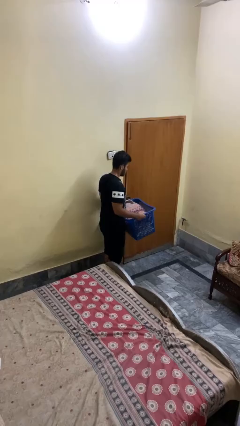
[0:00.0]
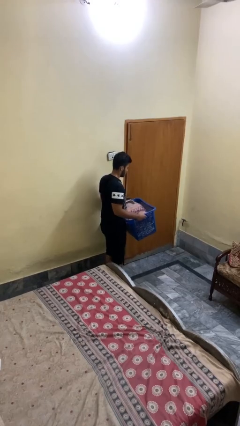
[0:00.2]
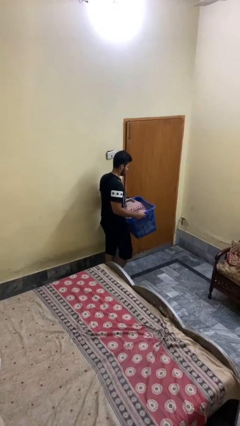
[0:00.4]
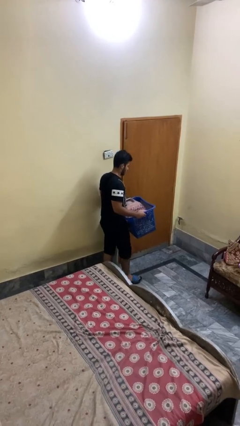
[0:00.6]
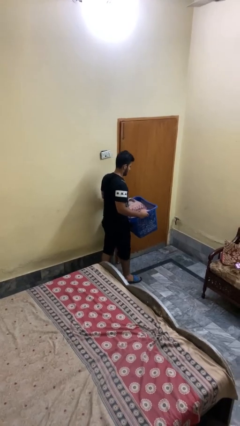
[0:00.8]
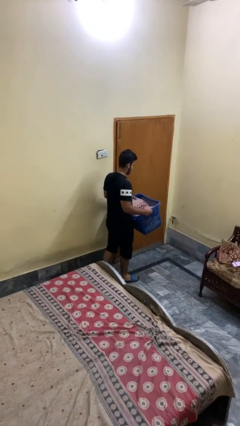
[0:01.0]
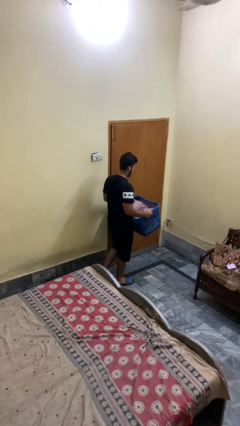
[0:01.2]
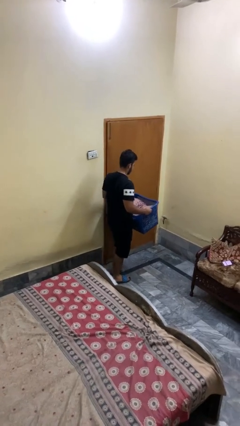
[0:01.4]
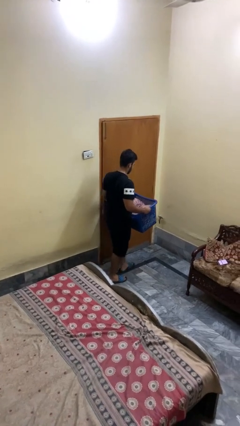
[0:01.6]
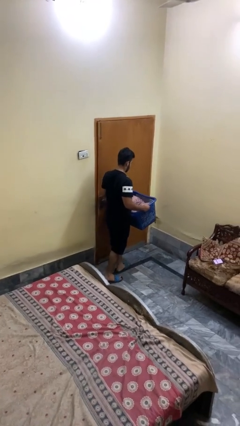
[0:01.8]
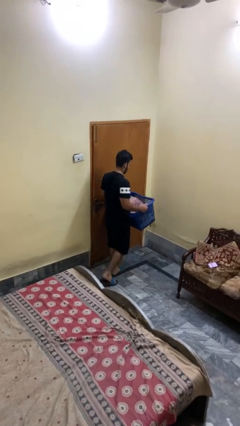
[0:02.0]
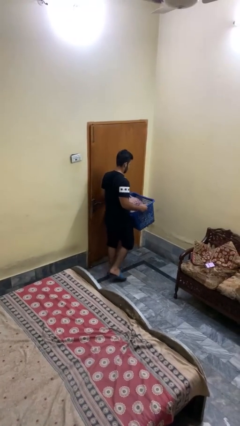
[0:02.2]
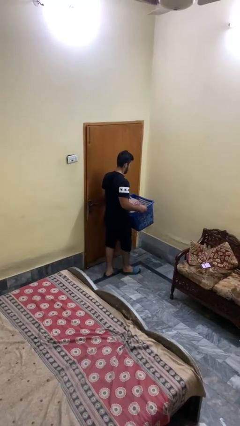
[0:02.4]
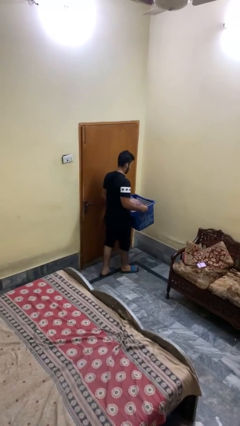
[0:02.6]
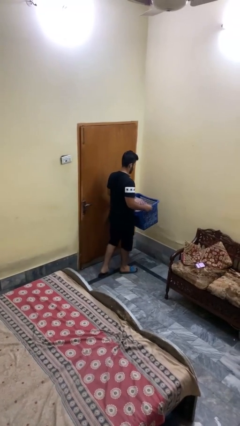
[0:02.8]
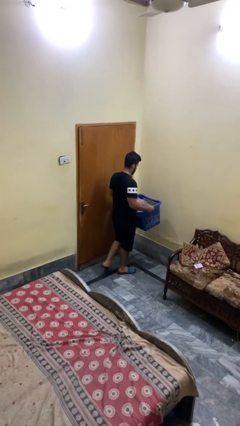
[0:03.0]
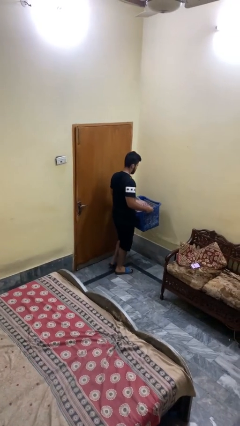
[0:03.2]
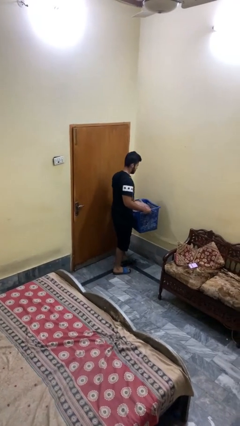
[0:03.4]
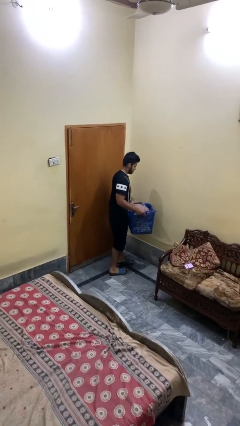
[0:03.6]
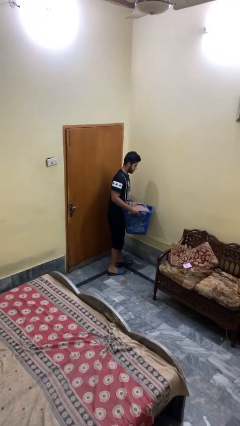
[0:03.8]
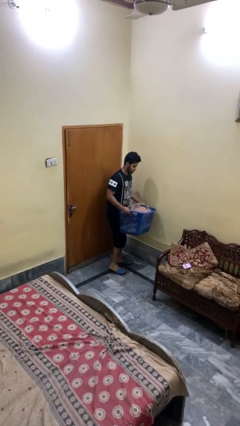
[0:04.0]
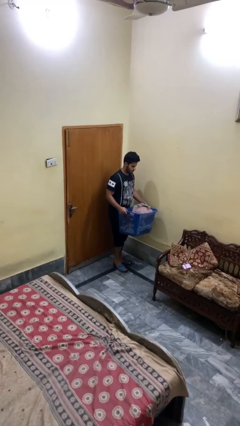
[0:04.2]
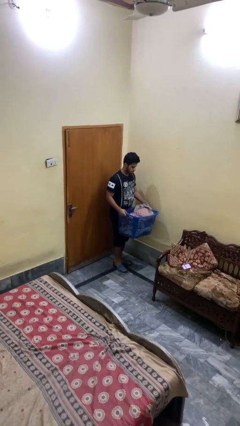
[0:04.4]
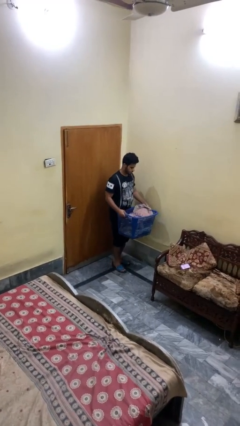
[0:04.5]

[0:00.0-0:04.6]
person carries laundry basket

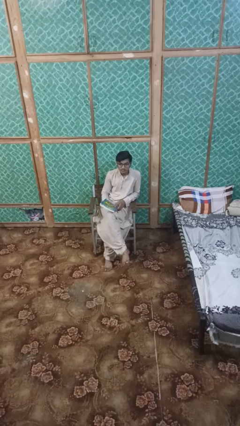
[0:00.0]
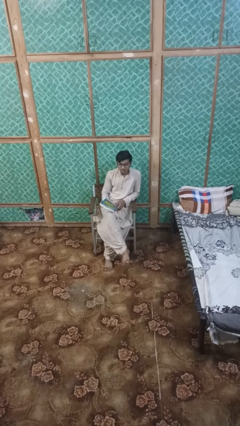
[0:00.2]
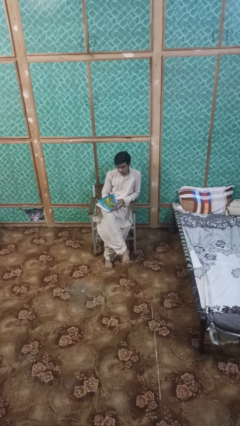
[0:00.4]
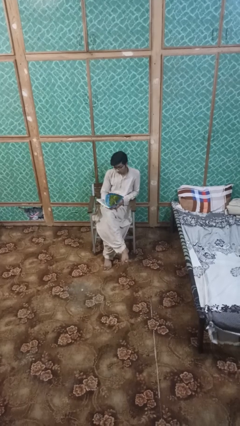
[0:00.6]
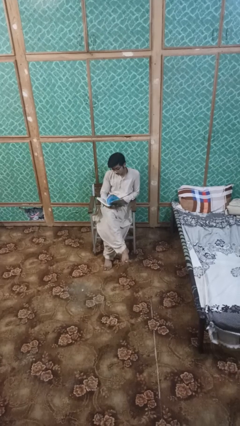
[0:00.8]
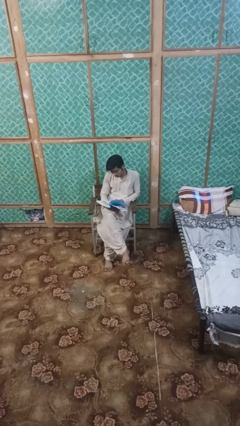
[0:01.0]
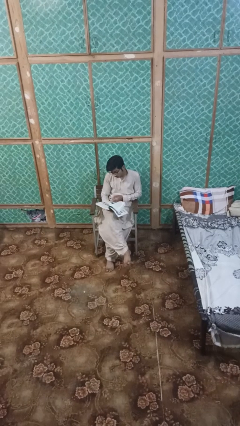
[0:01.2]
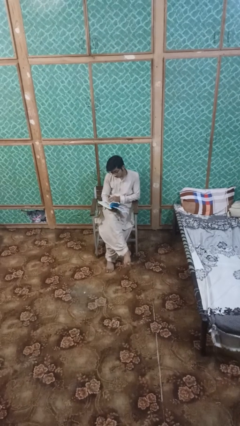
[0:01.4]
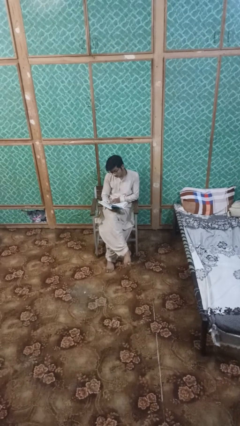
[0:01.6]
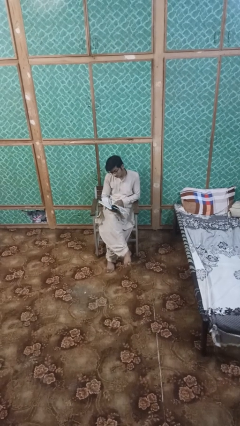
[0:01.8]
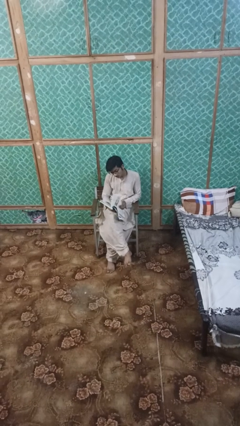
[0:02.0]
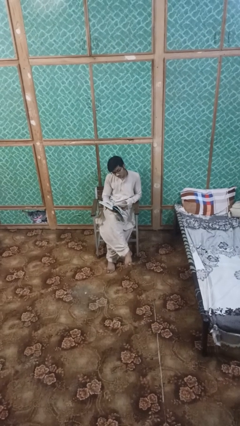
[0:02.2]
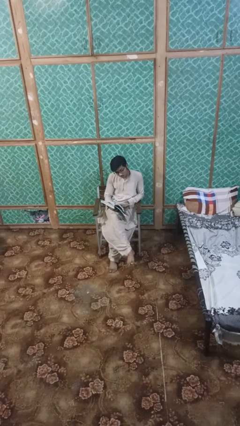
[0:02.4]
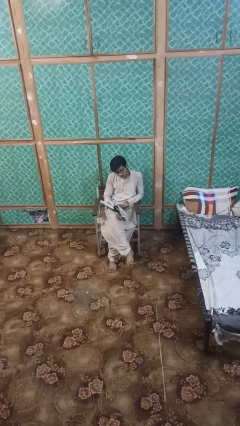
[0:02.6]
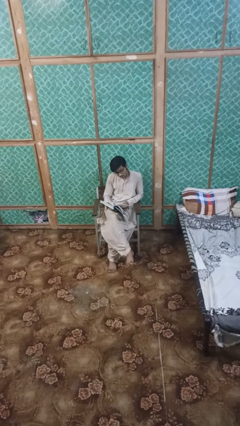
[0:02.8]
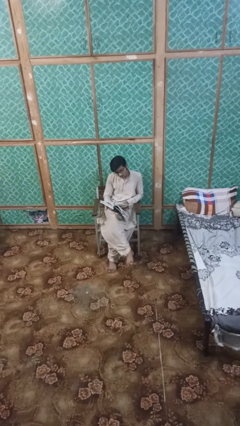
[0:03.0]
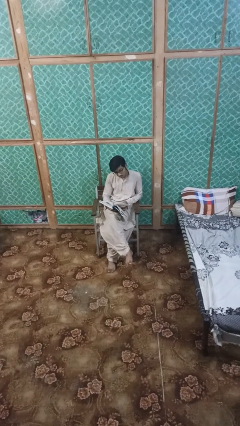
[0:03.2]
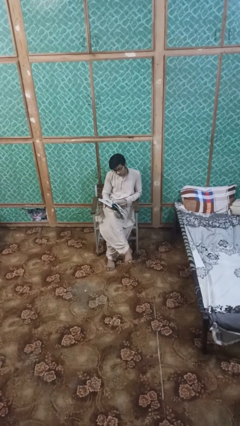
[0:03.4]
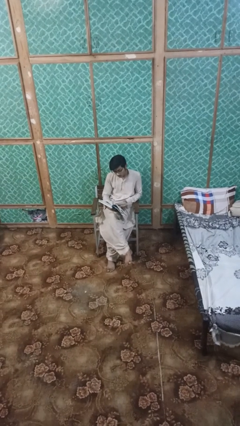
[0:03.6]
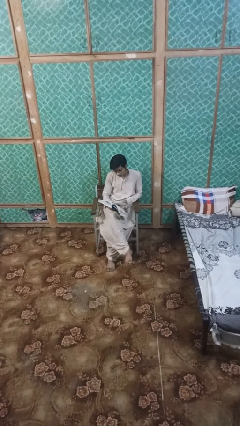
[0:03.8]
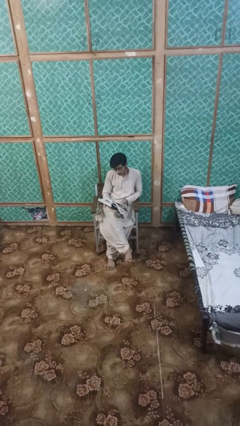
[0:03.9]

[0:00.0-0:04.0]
person reads book

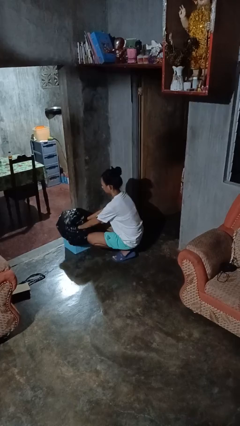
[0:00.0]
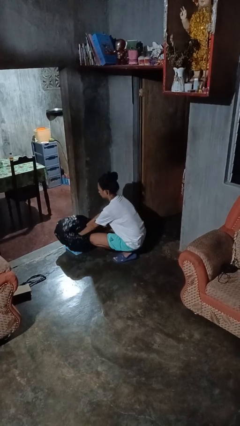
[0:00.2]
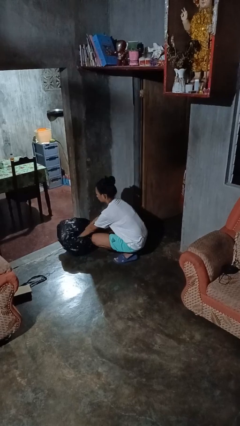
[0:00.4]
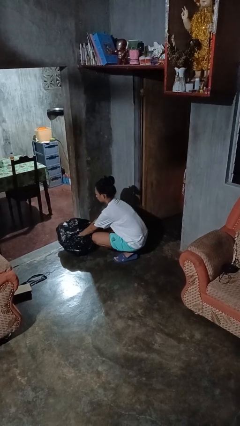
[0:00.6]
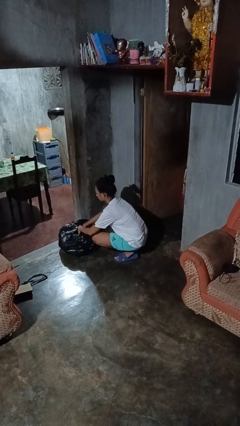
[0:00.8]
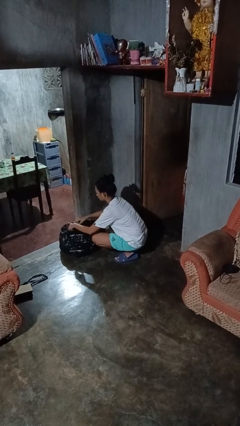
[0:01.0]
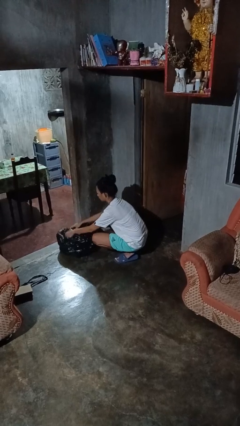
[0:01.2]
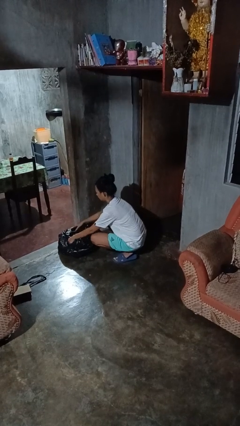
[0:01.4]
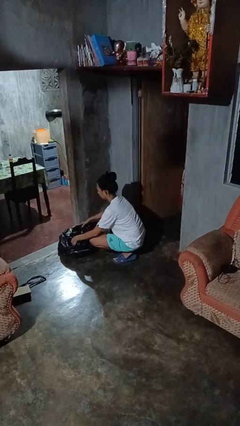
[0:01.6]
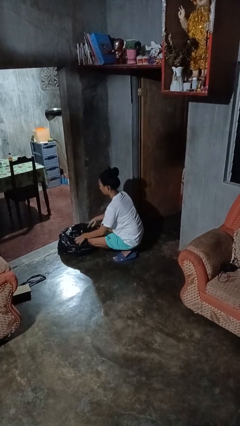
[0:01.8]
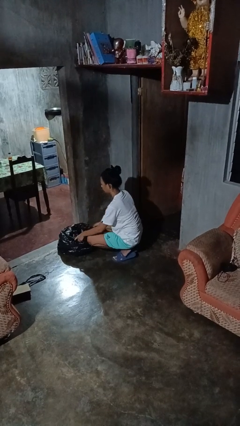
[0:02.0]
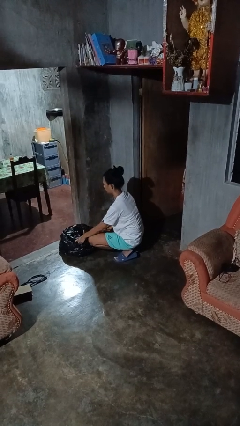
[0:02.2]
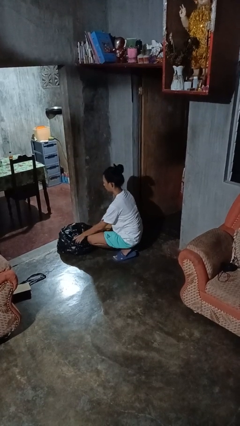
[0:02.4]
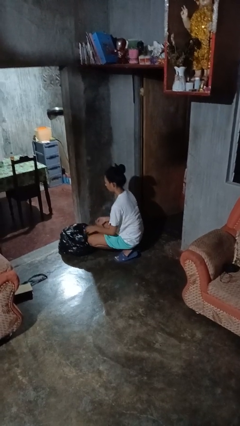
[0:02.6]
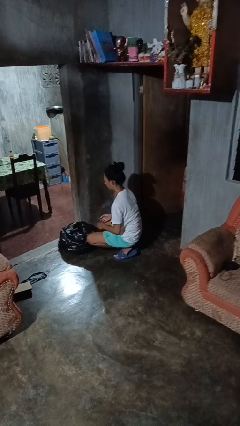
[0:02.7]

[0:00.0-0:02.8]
person inserts trashbag into trashcan

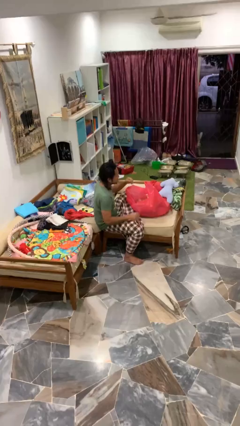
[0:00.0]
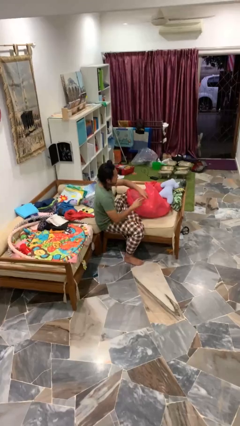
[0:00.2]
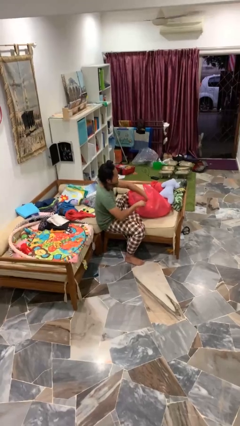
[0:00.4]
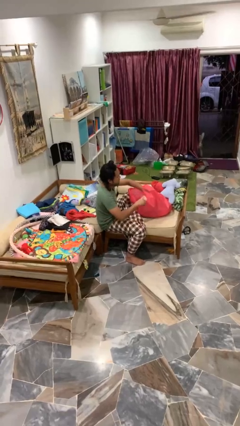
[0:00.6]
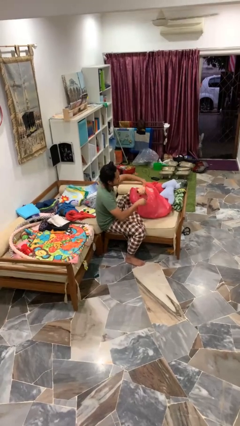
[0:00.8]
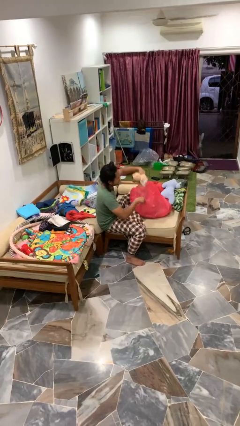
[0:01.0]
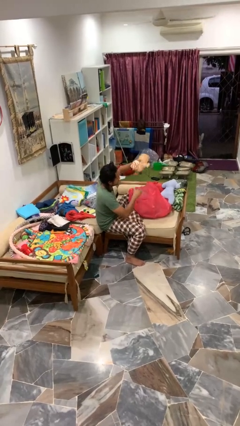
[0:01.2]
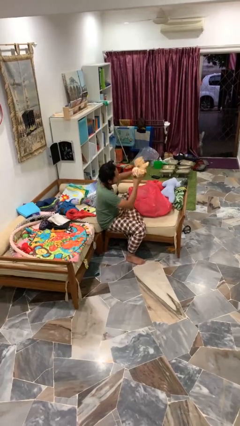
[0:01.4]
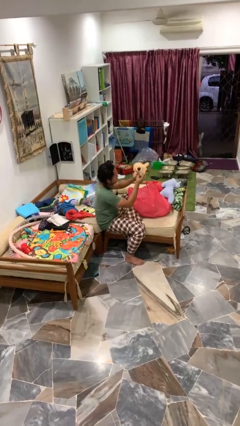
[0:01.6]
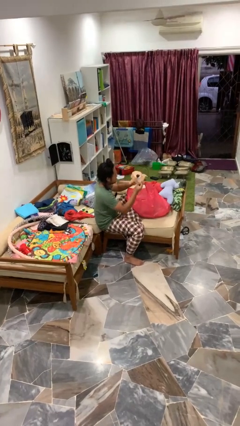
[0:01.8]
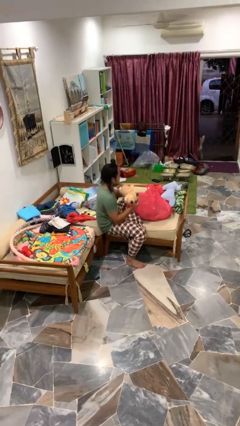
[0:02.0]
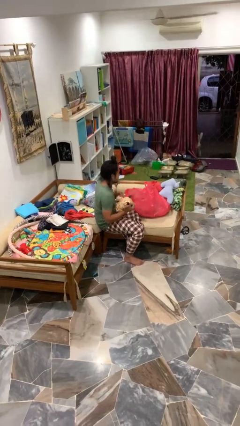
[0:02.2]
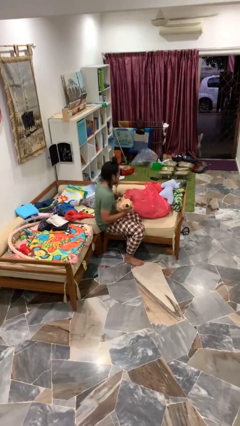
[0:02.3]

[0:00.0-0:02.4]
person takes object from bag

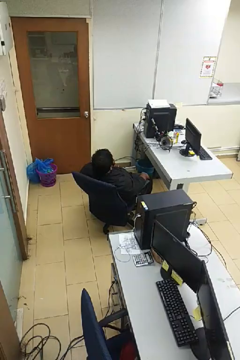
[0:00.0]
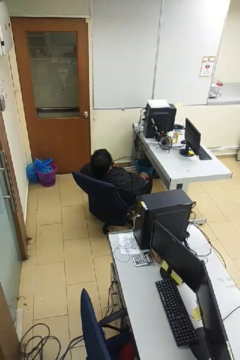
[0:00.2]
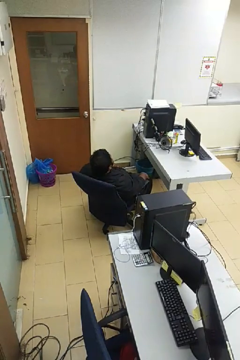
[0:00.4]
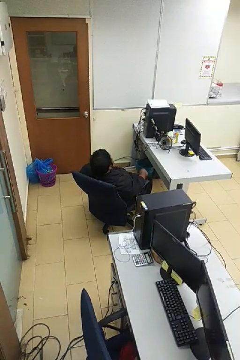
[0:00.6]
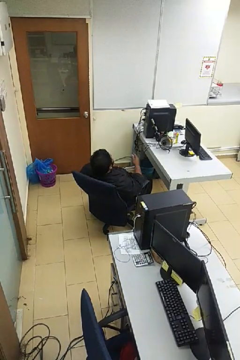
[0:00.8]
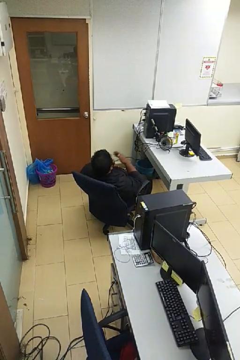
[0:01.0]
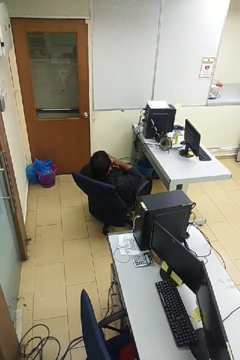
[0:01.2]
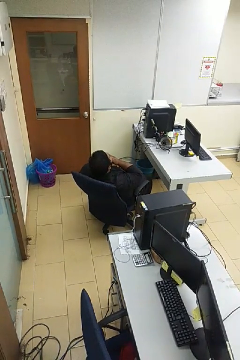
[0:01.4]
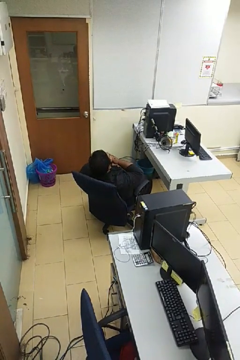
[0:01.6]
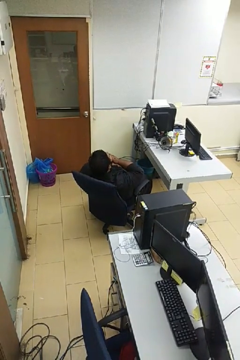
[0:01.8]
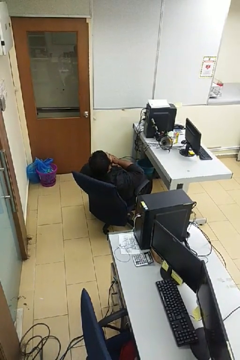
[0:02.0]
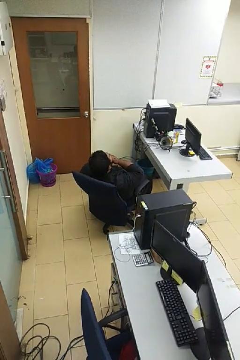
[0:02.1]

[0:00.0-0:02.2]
person yawns

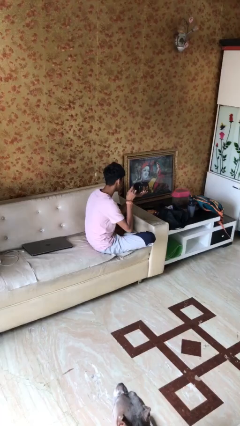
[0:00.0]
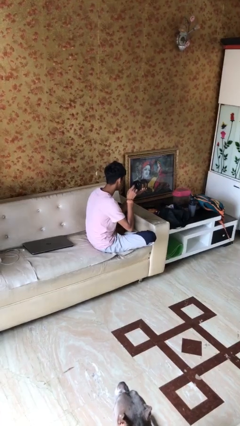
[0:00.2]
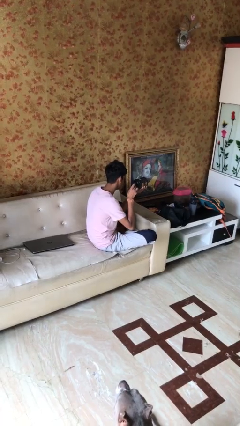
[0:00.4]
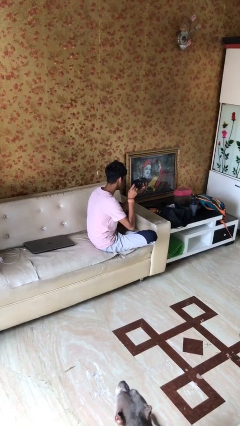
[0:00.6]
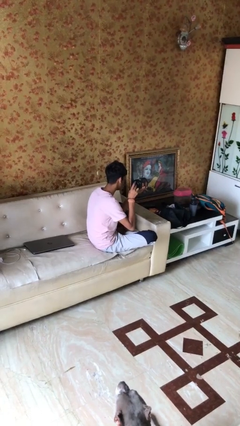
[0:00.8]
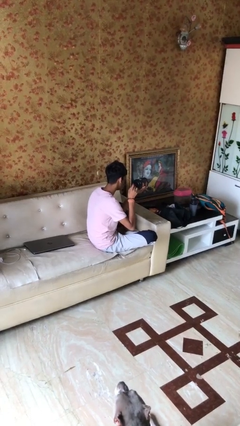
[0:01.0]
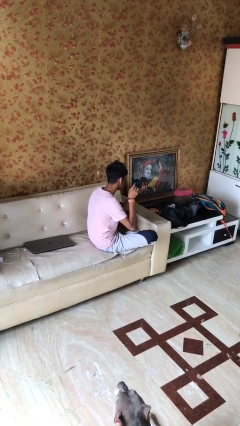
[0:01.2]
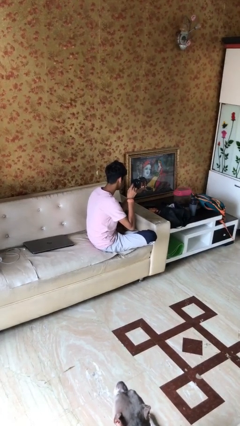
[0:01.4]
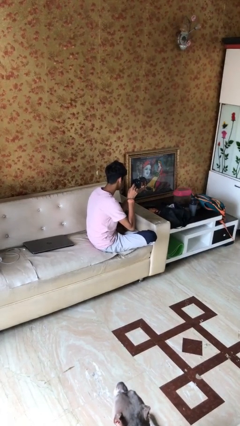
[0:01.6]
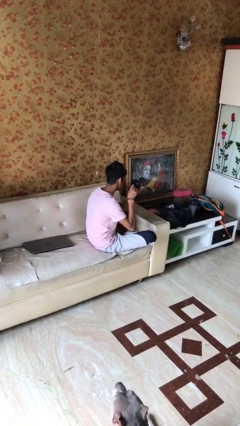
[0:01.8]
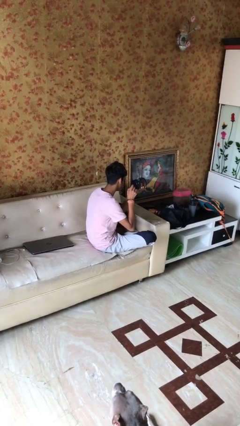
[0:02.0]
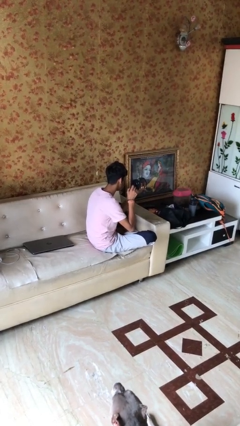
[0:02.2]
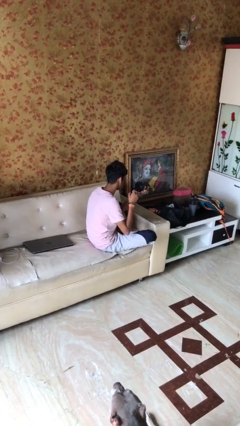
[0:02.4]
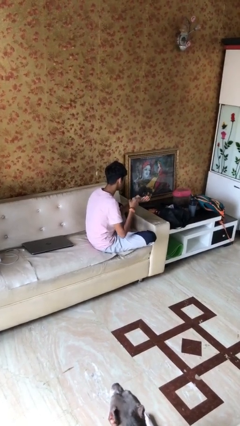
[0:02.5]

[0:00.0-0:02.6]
person taps object with finger
